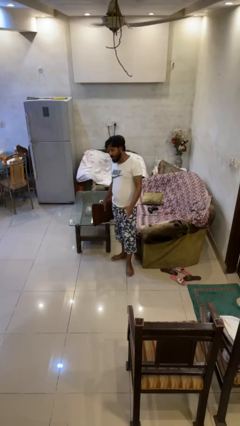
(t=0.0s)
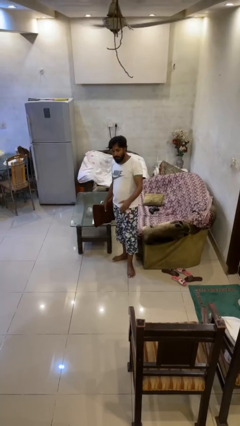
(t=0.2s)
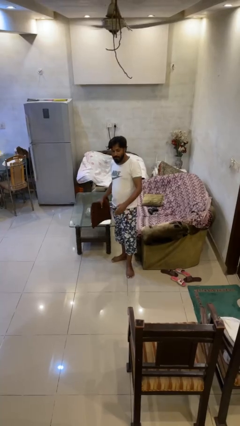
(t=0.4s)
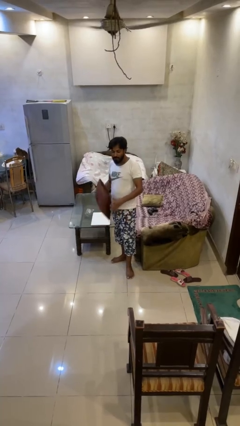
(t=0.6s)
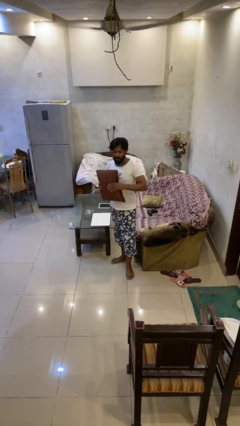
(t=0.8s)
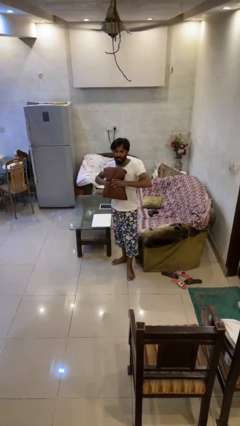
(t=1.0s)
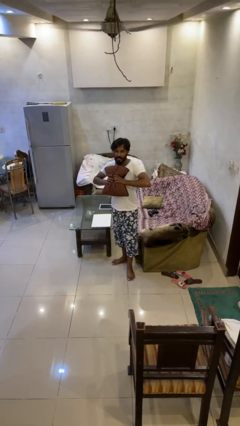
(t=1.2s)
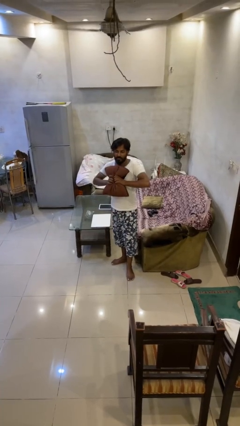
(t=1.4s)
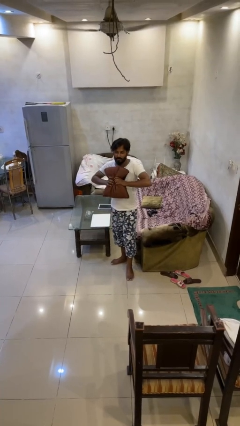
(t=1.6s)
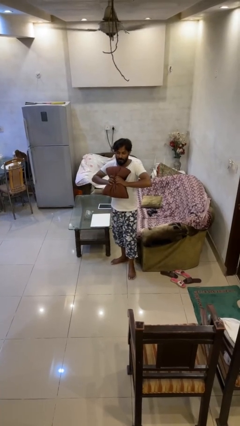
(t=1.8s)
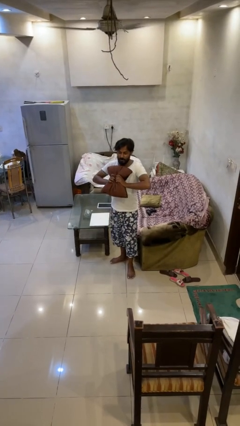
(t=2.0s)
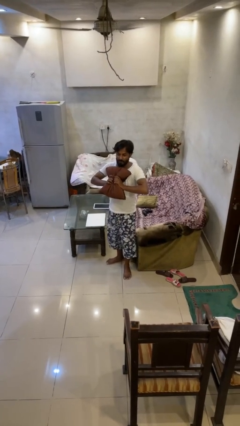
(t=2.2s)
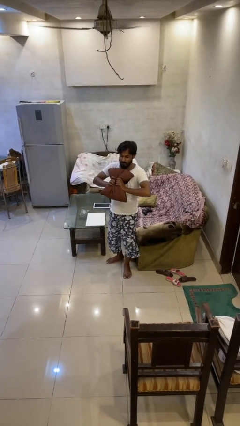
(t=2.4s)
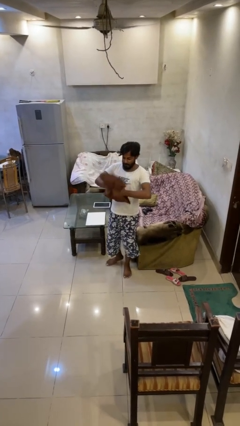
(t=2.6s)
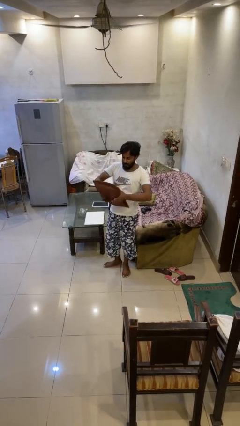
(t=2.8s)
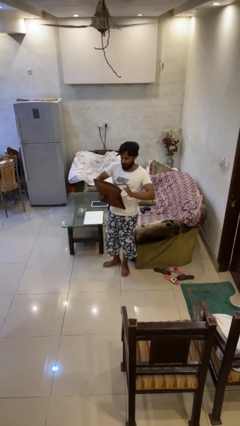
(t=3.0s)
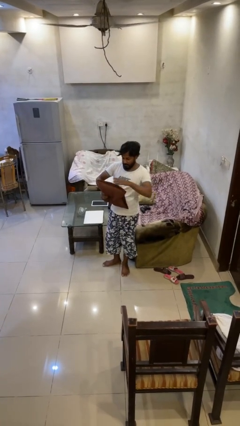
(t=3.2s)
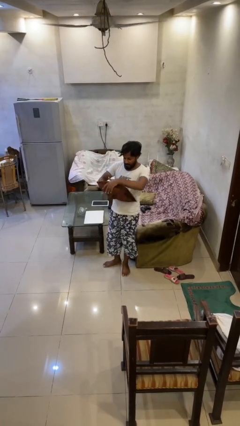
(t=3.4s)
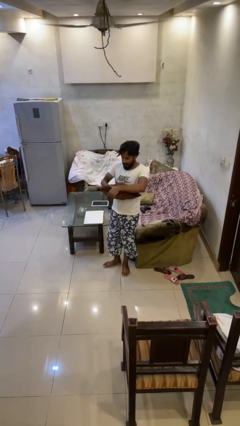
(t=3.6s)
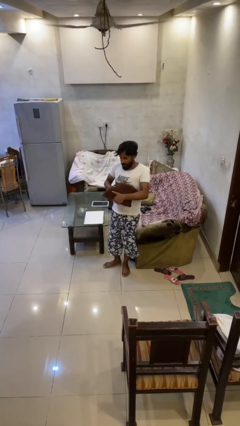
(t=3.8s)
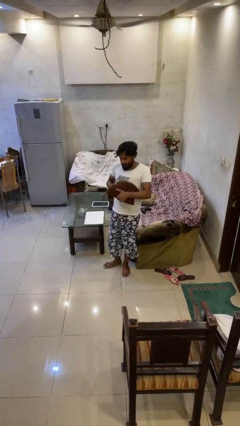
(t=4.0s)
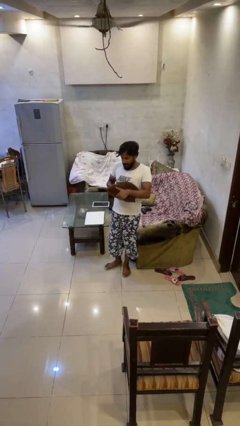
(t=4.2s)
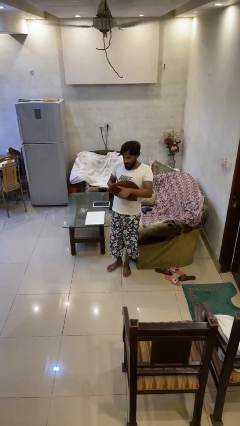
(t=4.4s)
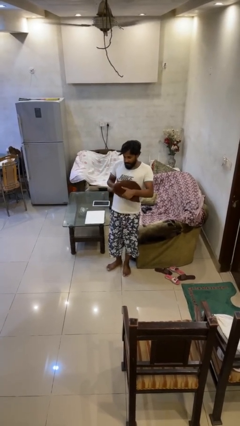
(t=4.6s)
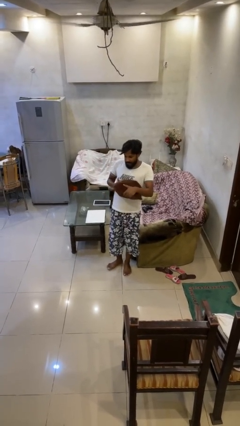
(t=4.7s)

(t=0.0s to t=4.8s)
person squeezes object

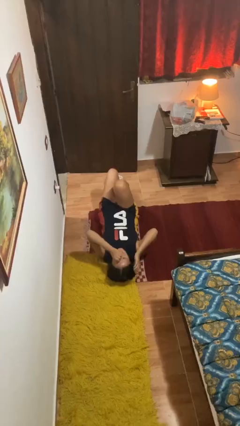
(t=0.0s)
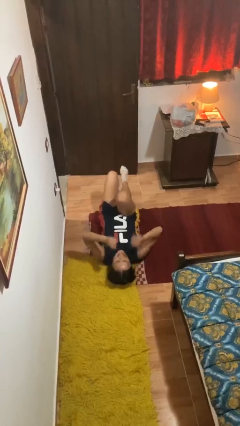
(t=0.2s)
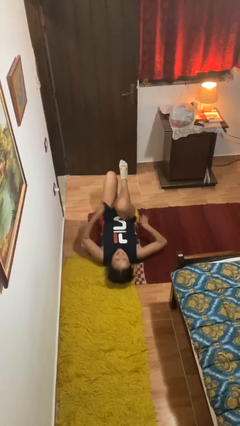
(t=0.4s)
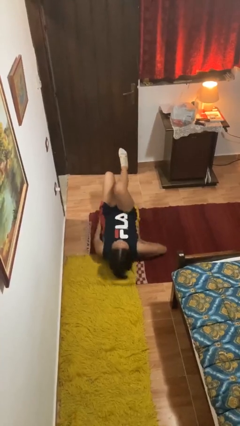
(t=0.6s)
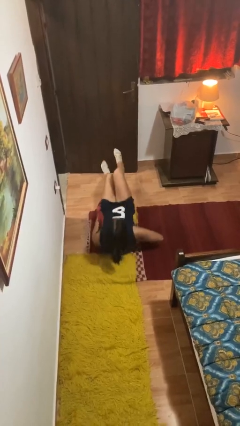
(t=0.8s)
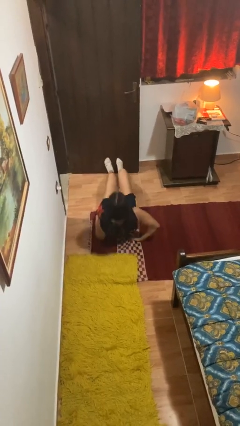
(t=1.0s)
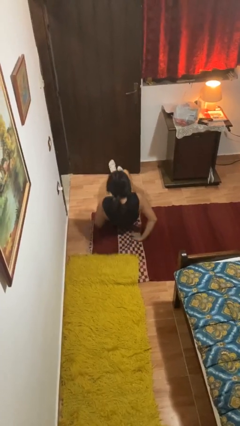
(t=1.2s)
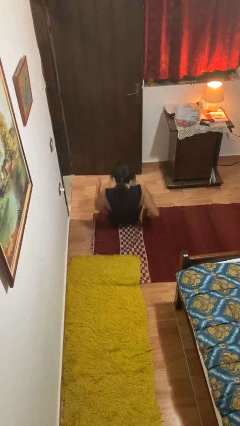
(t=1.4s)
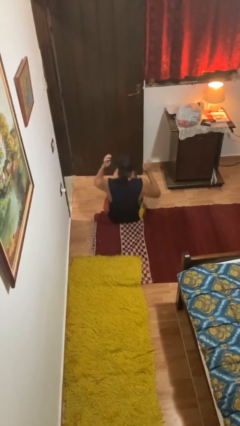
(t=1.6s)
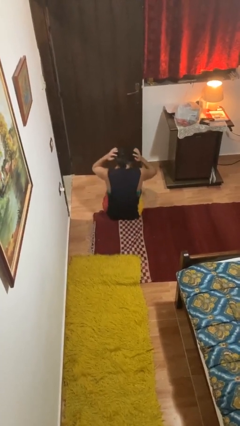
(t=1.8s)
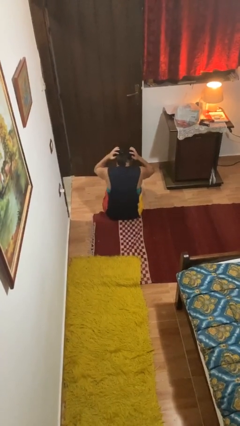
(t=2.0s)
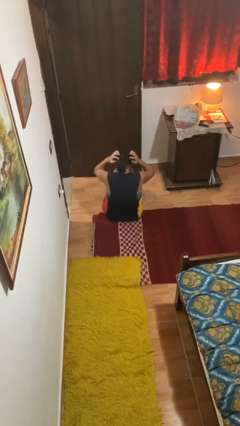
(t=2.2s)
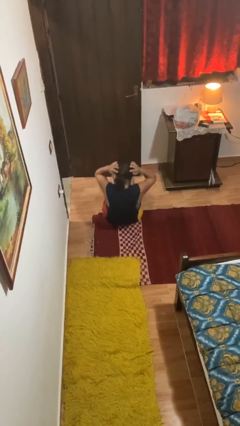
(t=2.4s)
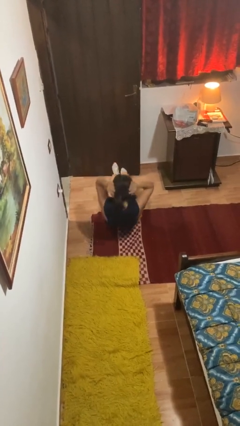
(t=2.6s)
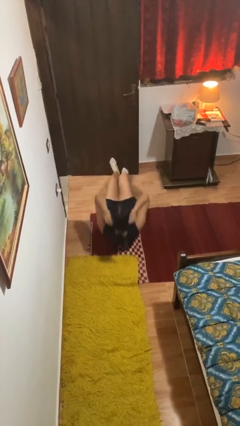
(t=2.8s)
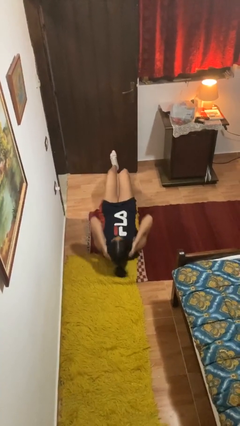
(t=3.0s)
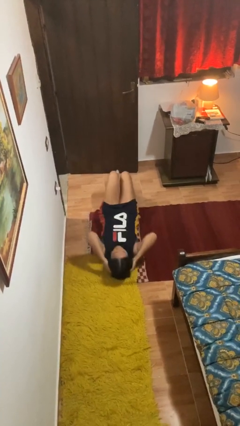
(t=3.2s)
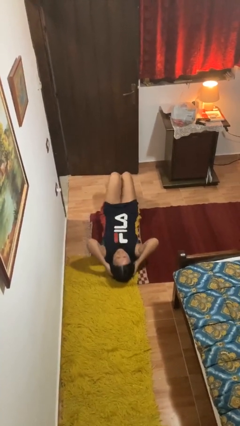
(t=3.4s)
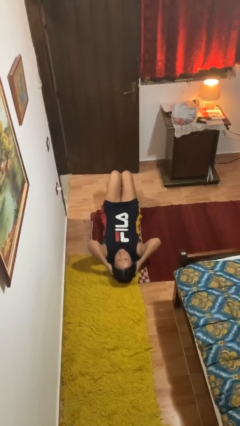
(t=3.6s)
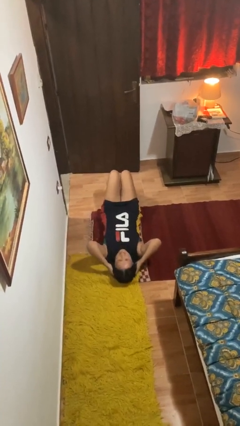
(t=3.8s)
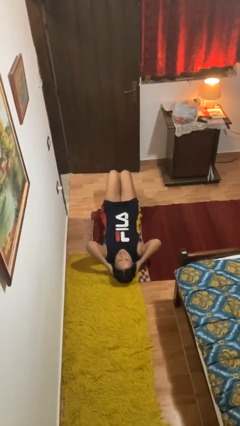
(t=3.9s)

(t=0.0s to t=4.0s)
person exercises with situp

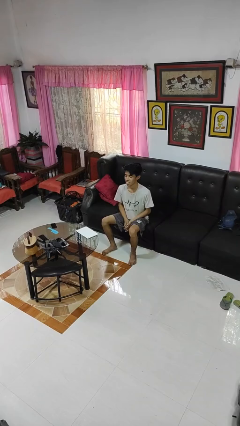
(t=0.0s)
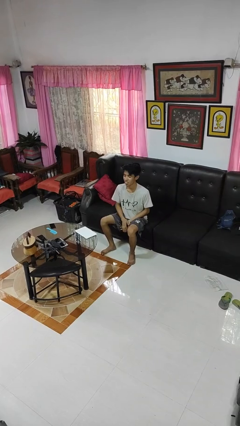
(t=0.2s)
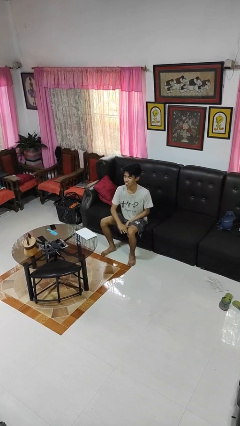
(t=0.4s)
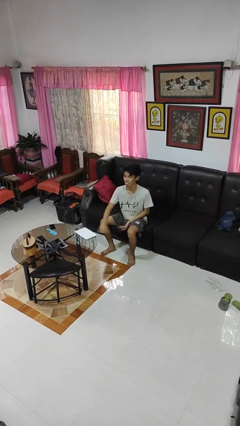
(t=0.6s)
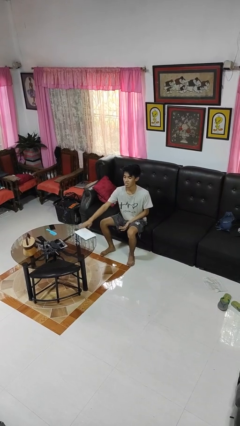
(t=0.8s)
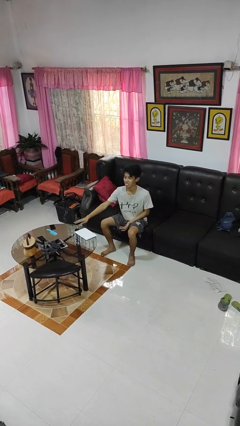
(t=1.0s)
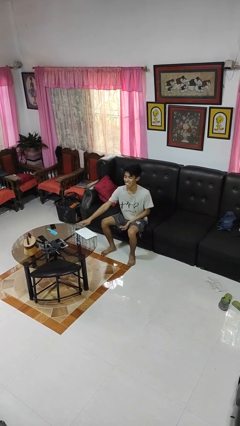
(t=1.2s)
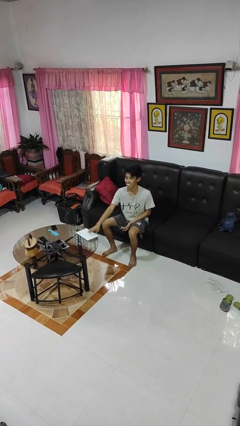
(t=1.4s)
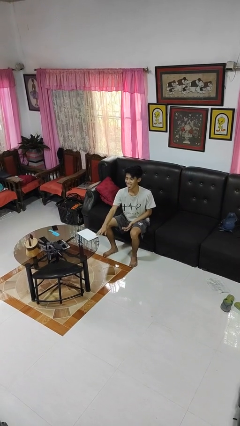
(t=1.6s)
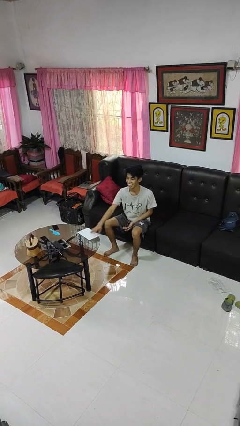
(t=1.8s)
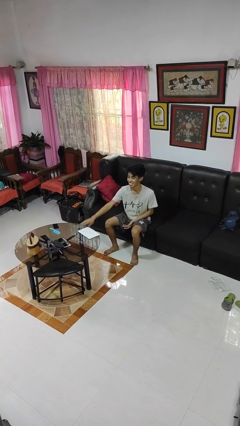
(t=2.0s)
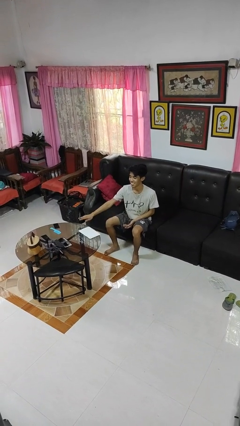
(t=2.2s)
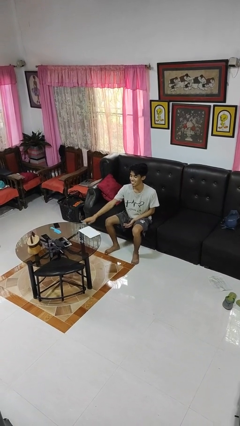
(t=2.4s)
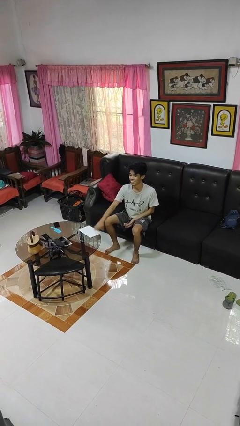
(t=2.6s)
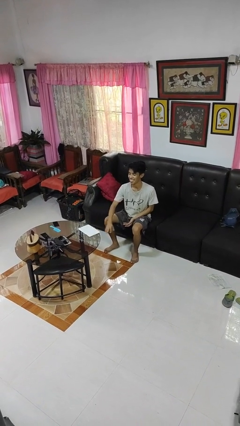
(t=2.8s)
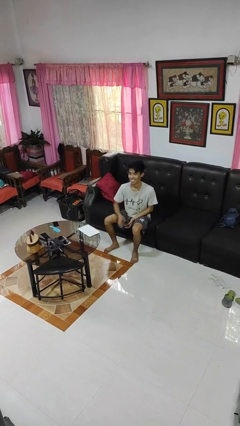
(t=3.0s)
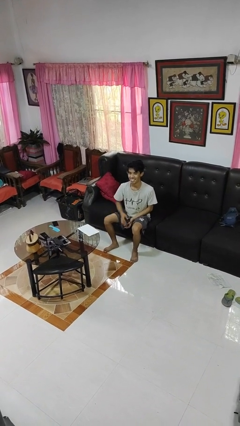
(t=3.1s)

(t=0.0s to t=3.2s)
person waves hand over object

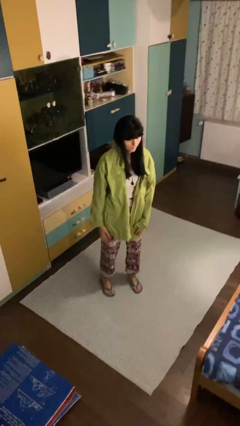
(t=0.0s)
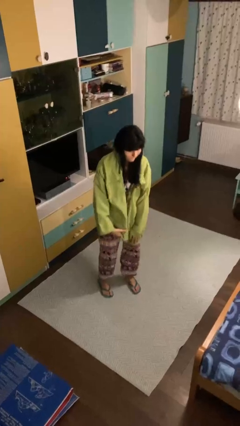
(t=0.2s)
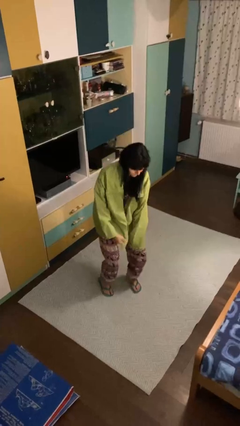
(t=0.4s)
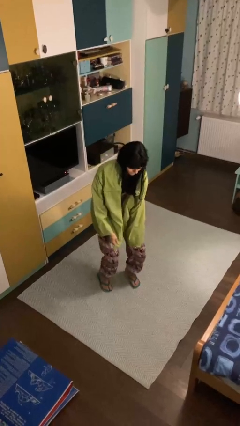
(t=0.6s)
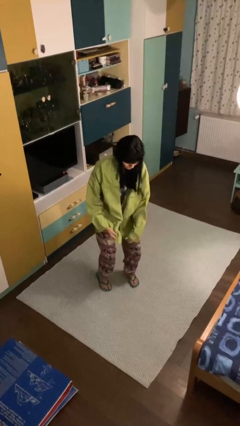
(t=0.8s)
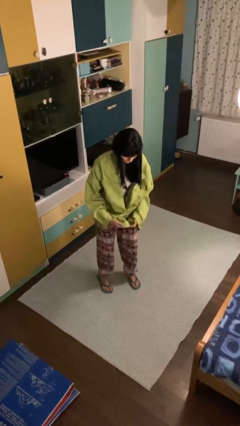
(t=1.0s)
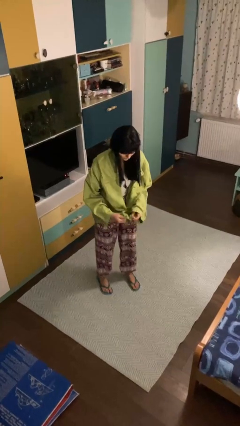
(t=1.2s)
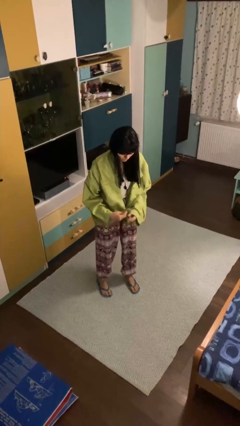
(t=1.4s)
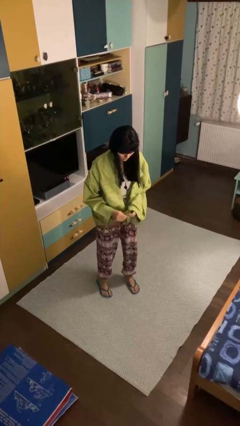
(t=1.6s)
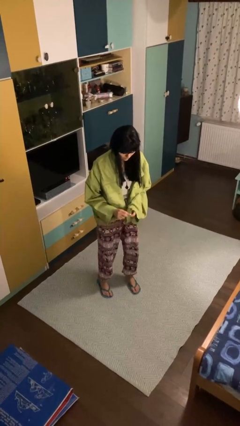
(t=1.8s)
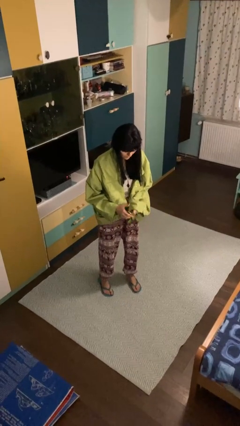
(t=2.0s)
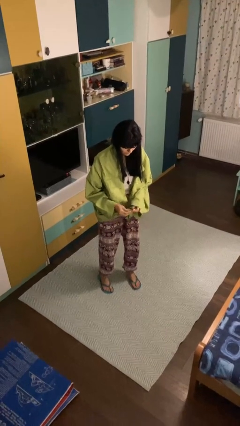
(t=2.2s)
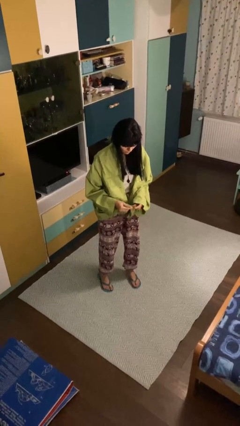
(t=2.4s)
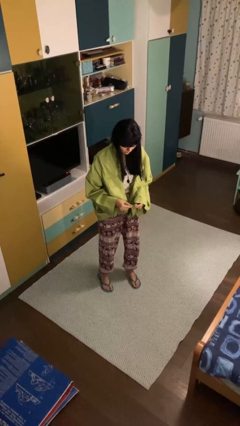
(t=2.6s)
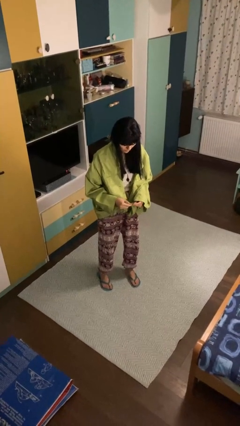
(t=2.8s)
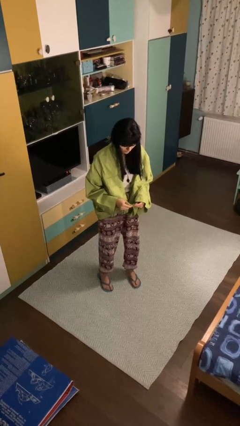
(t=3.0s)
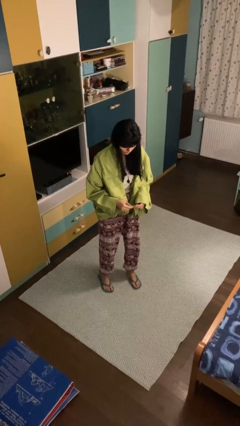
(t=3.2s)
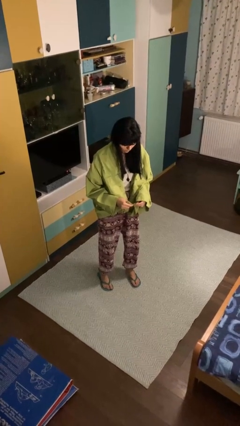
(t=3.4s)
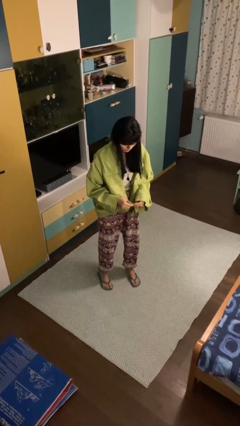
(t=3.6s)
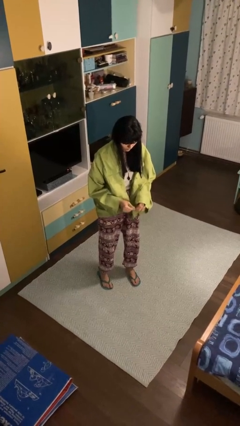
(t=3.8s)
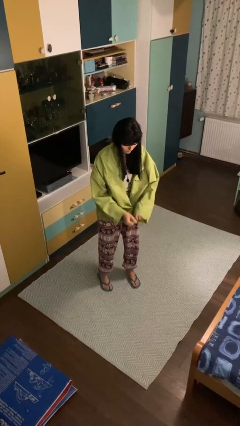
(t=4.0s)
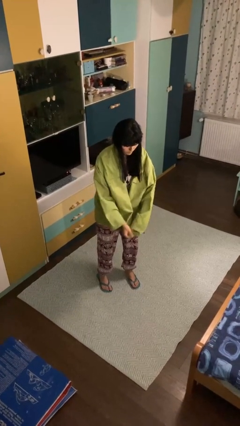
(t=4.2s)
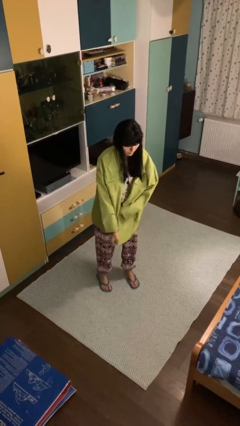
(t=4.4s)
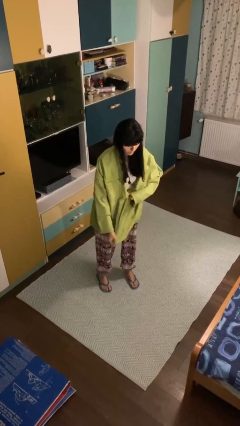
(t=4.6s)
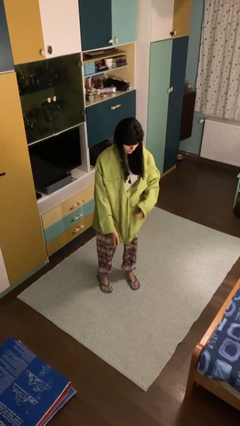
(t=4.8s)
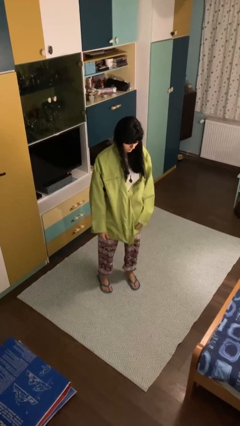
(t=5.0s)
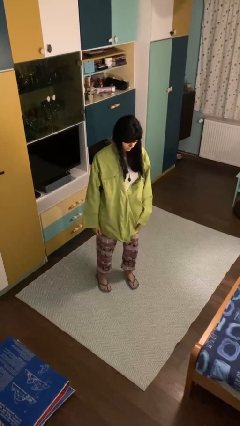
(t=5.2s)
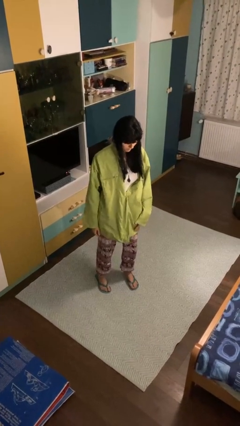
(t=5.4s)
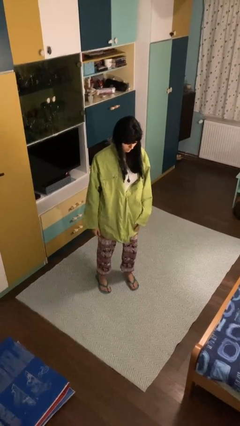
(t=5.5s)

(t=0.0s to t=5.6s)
person zips up jacket
